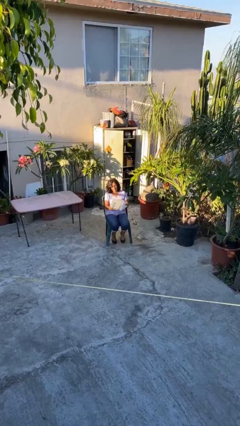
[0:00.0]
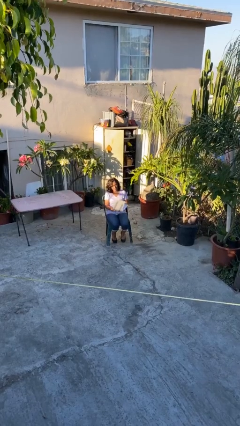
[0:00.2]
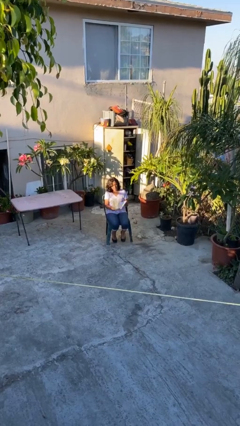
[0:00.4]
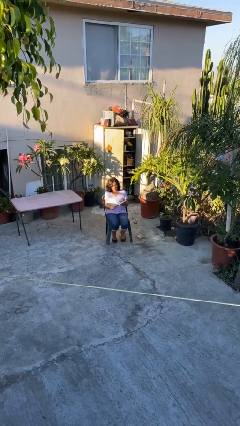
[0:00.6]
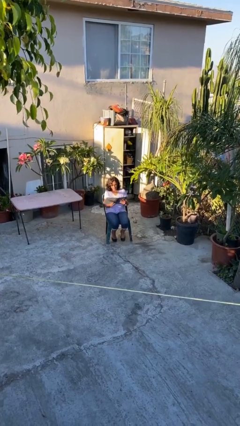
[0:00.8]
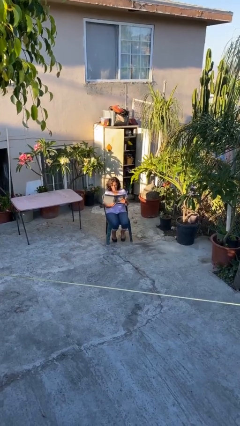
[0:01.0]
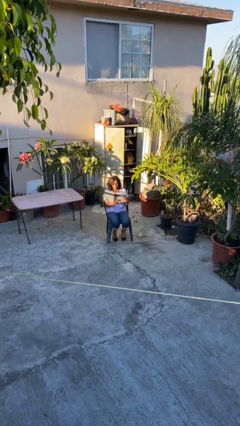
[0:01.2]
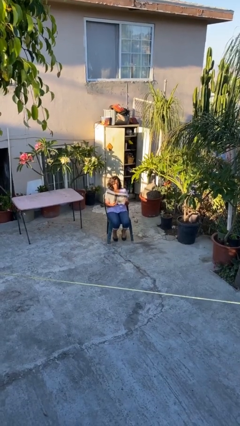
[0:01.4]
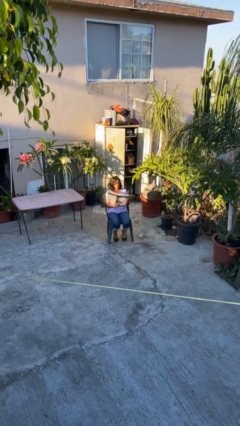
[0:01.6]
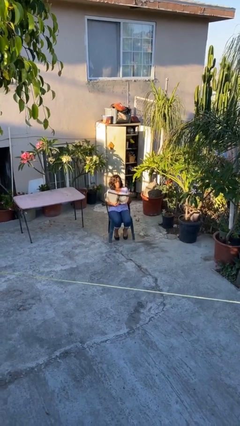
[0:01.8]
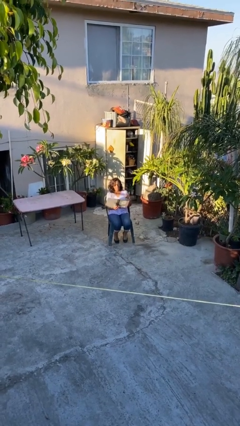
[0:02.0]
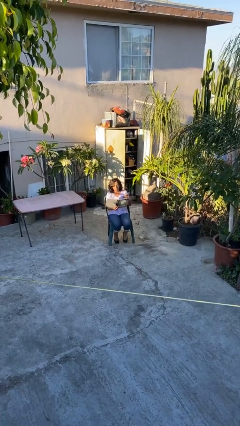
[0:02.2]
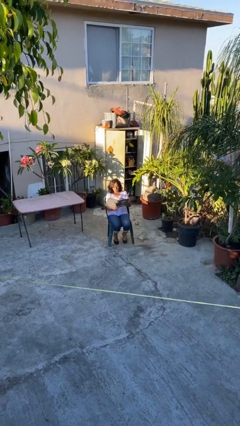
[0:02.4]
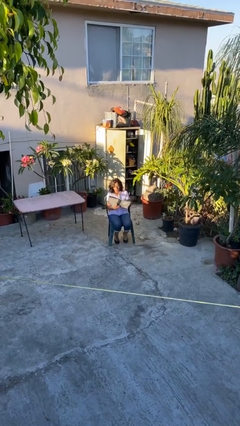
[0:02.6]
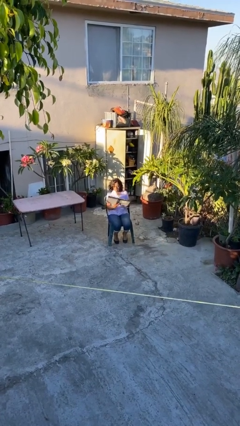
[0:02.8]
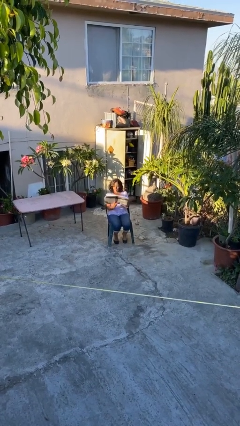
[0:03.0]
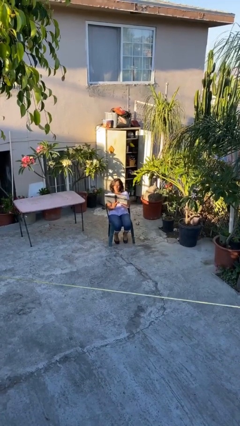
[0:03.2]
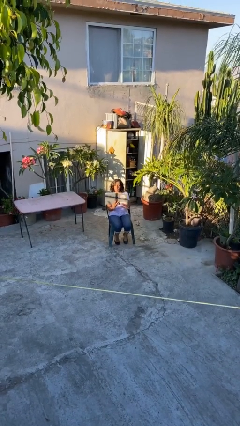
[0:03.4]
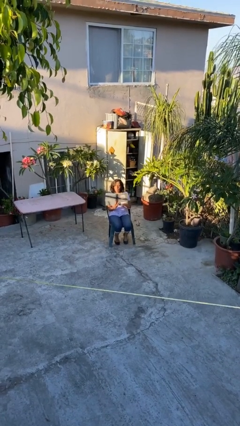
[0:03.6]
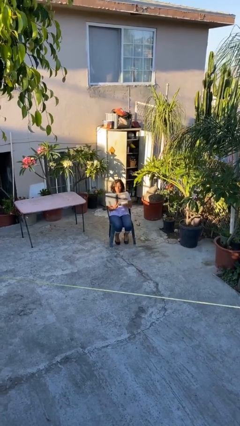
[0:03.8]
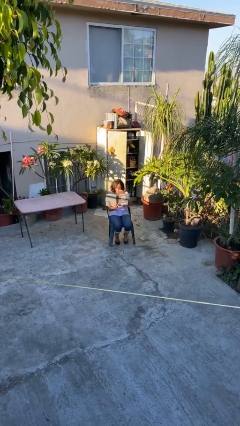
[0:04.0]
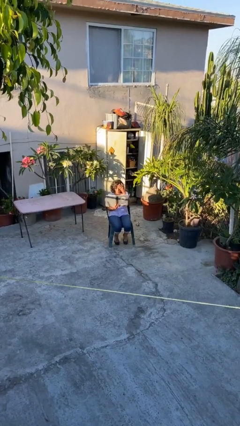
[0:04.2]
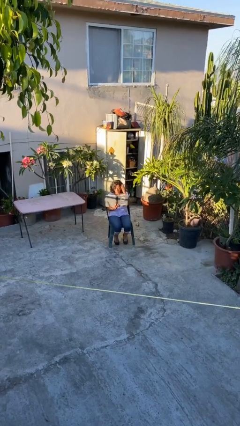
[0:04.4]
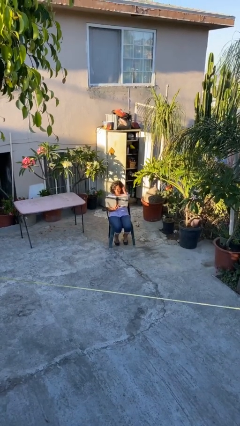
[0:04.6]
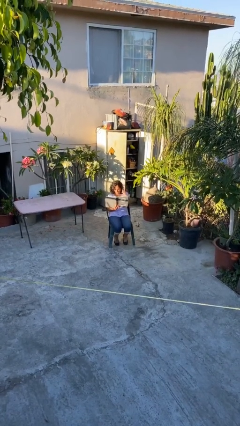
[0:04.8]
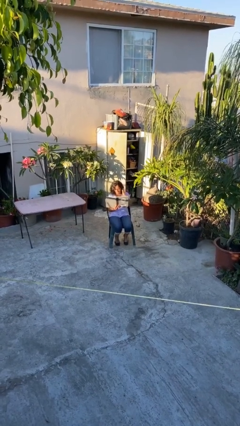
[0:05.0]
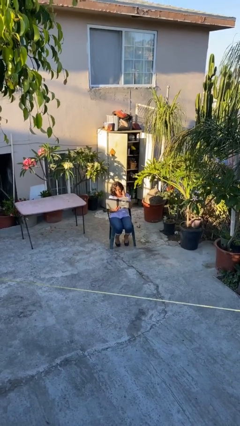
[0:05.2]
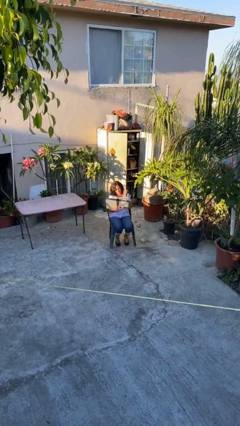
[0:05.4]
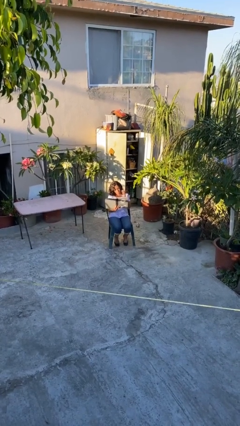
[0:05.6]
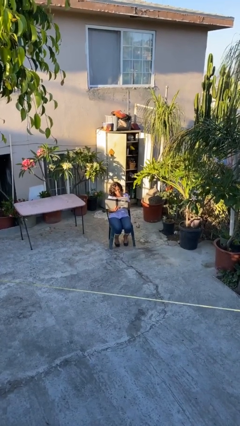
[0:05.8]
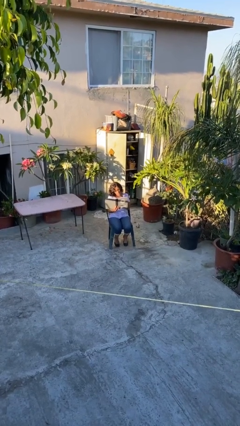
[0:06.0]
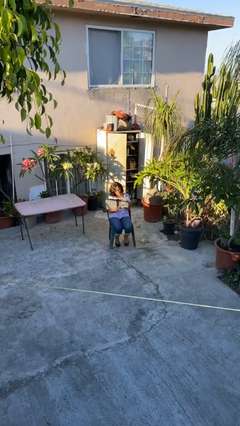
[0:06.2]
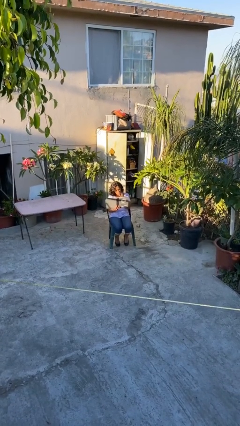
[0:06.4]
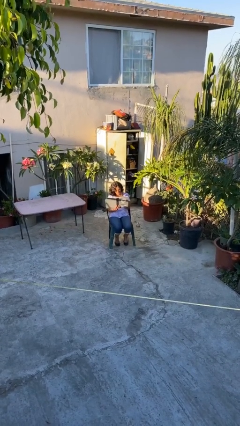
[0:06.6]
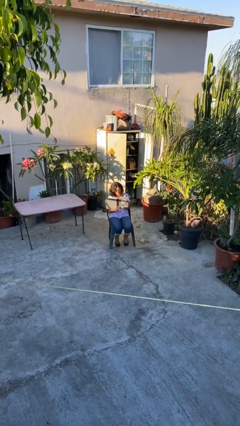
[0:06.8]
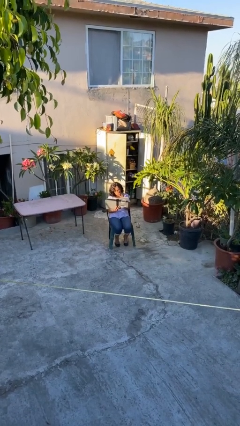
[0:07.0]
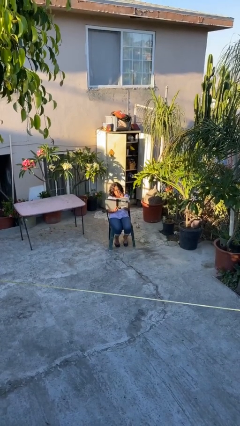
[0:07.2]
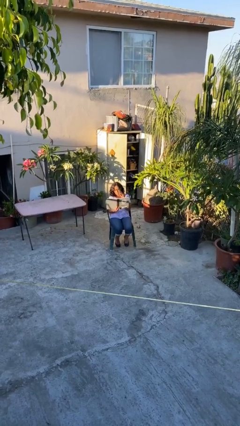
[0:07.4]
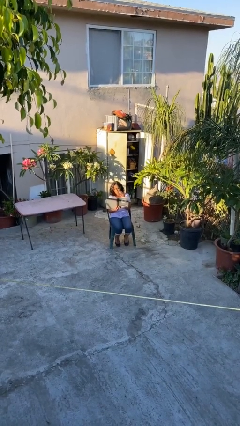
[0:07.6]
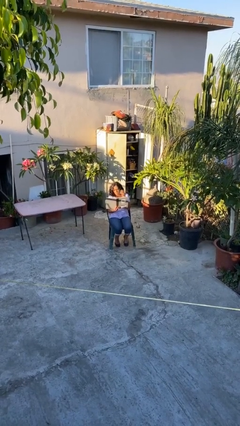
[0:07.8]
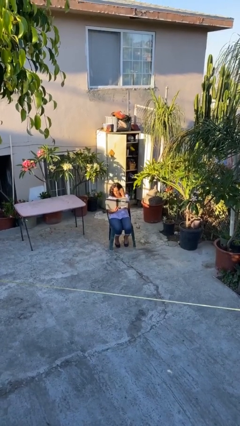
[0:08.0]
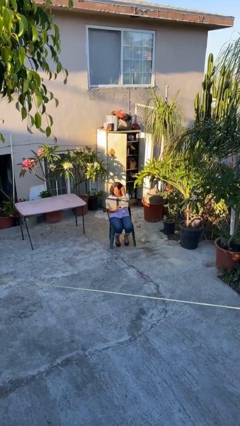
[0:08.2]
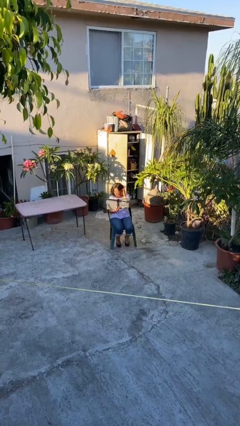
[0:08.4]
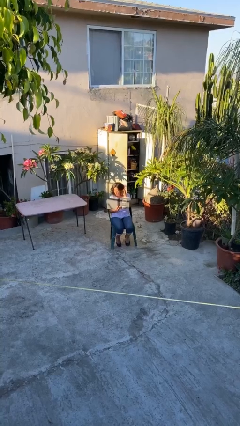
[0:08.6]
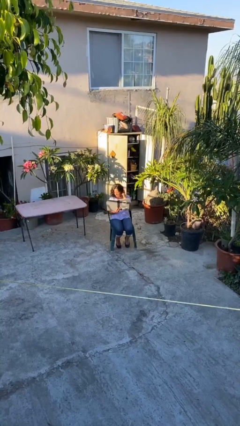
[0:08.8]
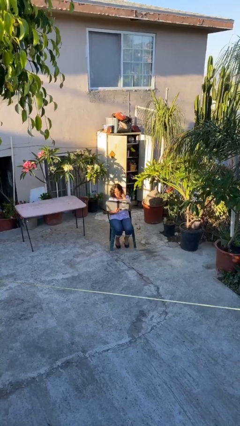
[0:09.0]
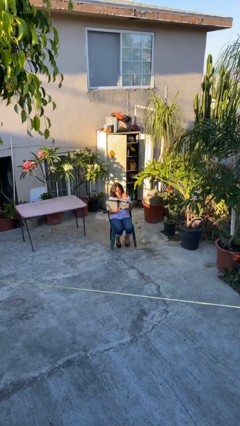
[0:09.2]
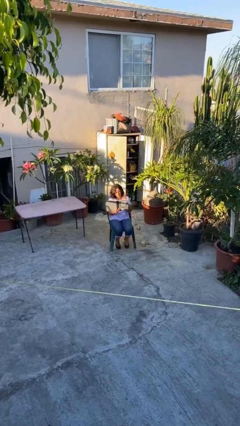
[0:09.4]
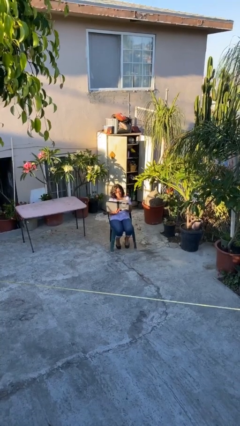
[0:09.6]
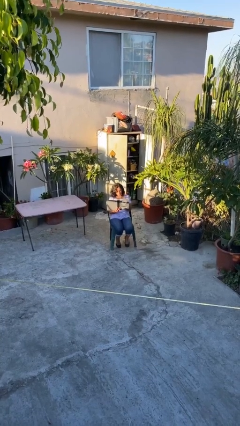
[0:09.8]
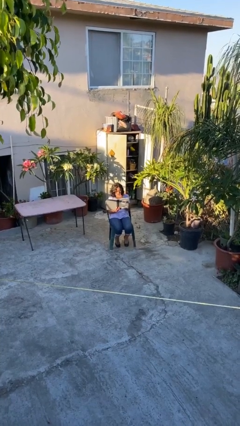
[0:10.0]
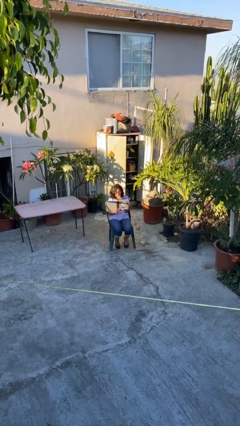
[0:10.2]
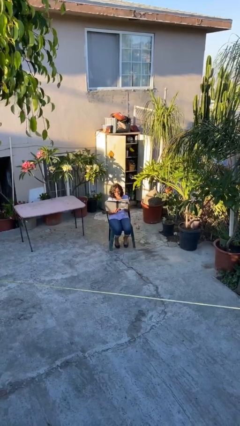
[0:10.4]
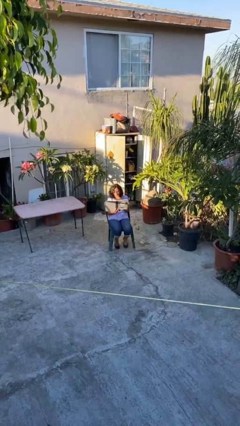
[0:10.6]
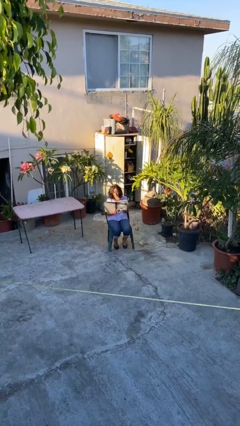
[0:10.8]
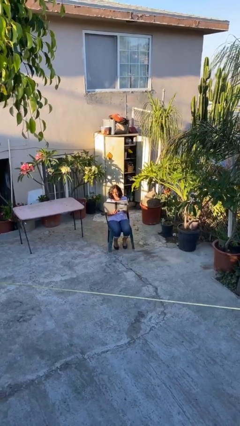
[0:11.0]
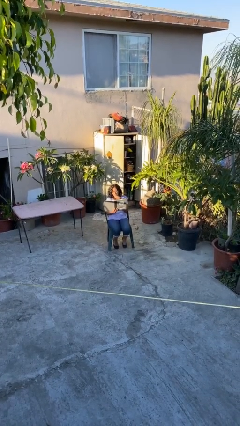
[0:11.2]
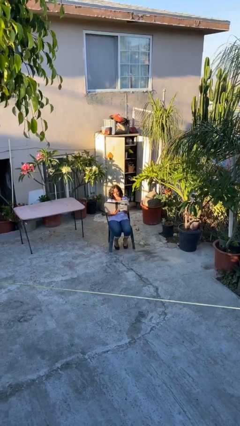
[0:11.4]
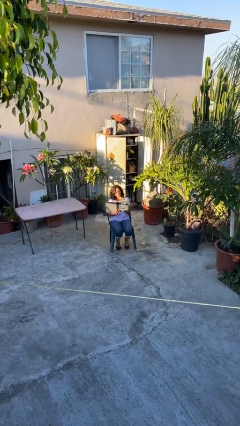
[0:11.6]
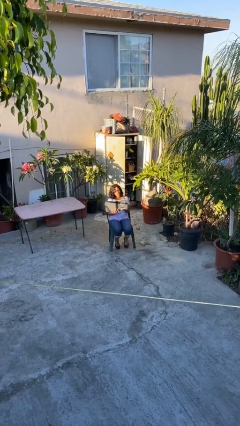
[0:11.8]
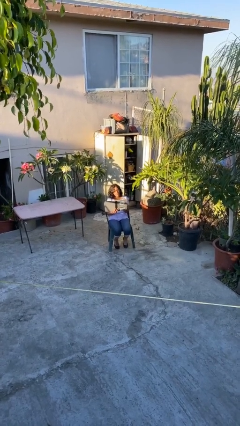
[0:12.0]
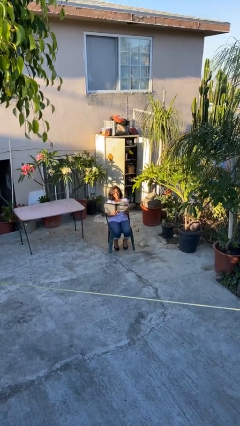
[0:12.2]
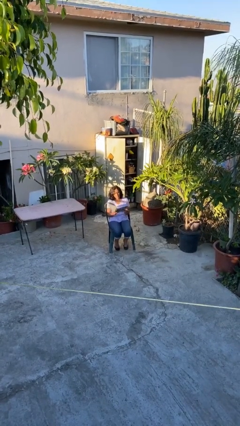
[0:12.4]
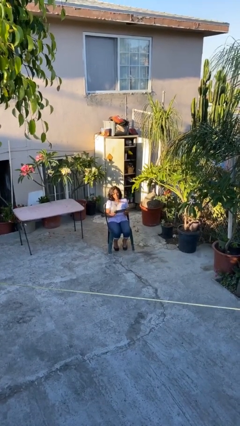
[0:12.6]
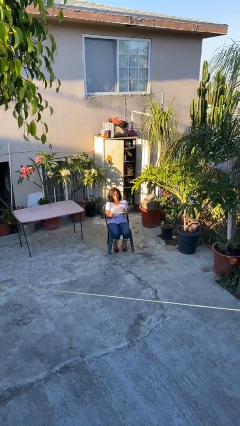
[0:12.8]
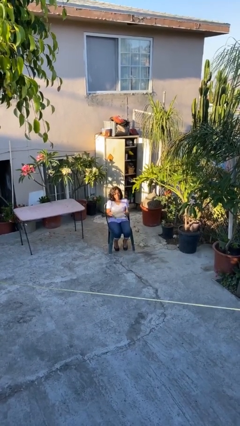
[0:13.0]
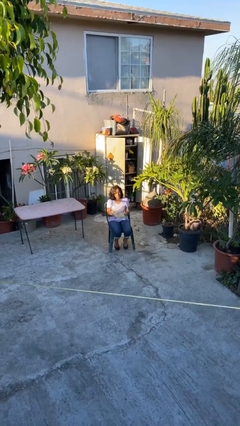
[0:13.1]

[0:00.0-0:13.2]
person reads document

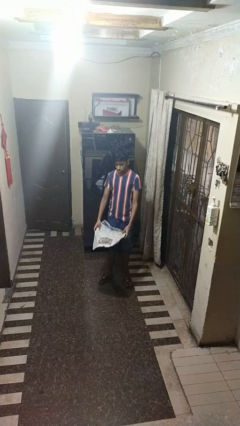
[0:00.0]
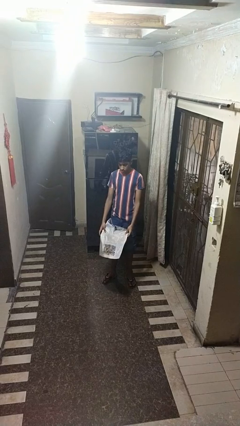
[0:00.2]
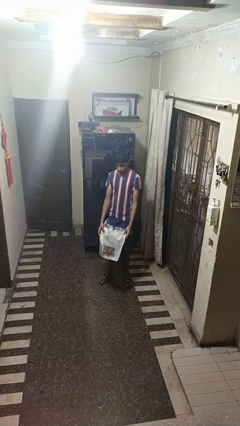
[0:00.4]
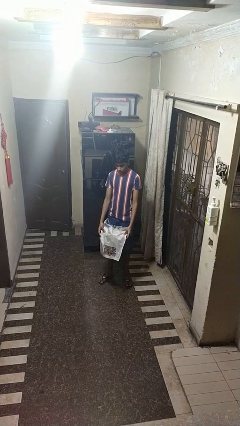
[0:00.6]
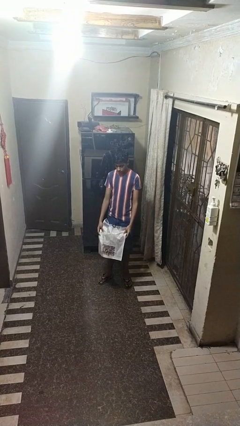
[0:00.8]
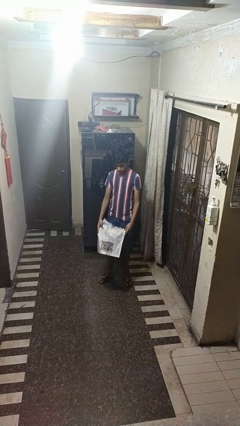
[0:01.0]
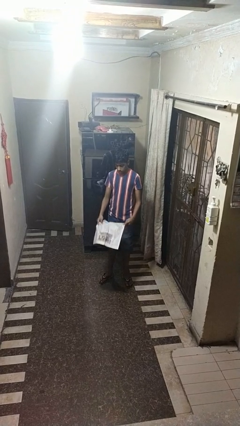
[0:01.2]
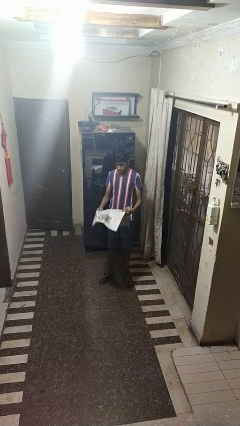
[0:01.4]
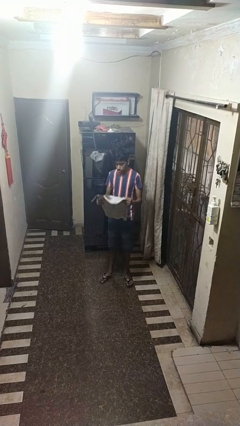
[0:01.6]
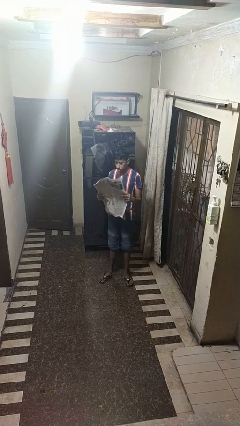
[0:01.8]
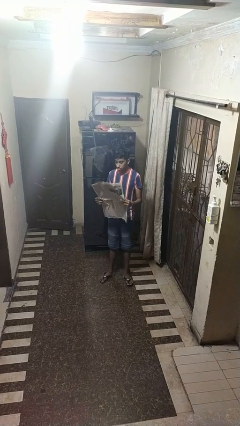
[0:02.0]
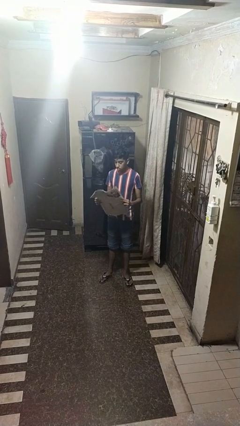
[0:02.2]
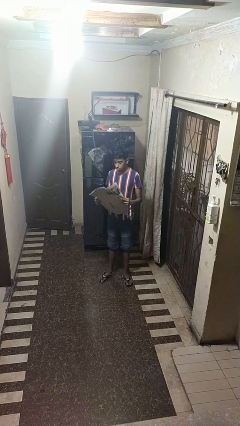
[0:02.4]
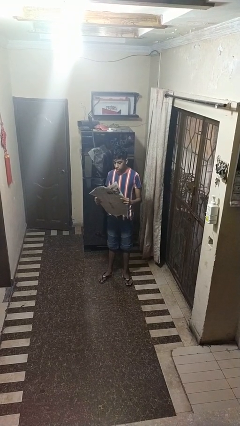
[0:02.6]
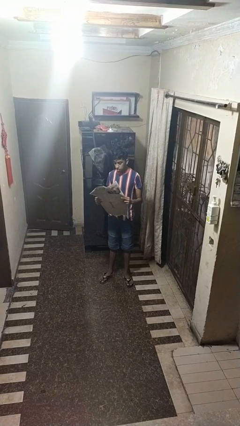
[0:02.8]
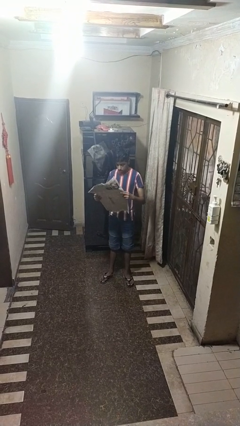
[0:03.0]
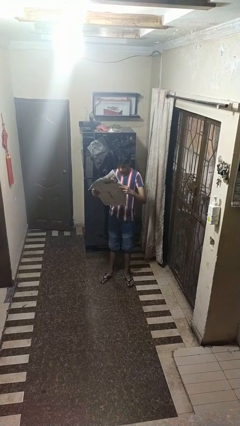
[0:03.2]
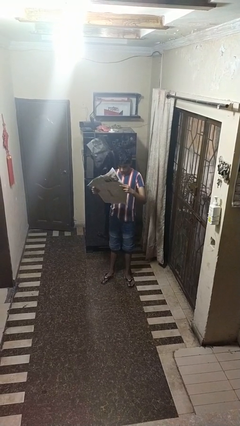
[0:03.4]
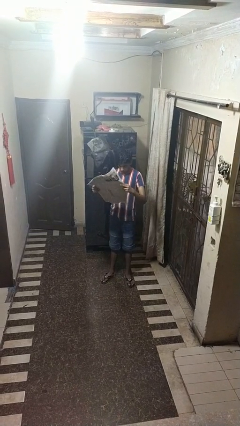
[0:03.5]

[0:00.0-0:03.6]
person reads newspaper

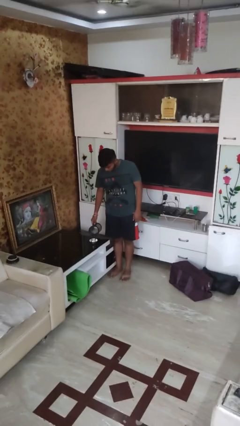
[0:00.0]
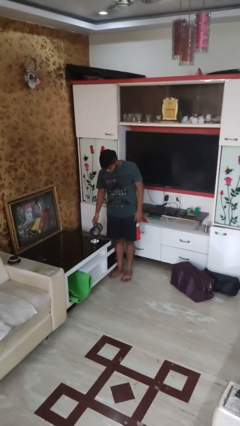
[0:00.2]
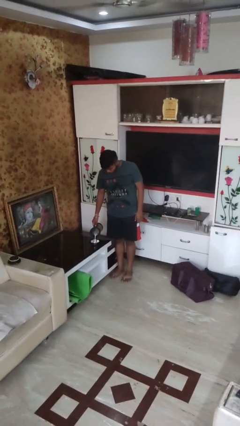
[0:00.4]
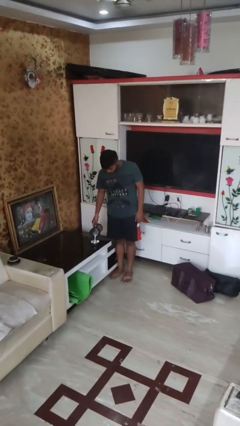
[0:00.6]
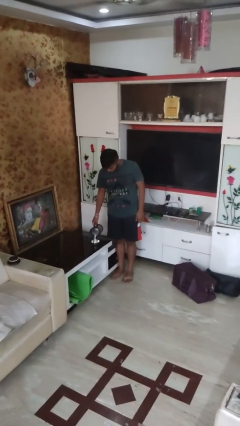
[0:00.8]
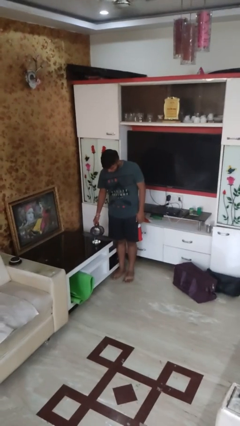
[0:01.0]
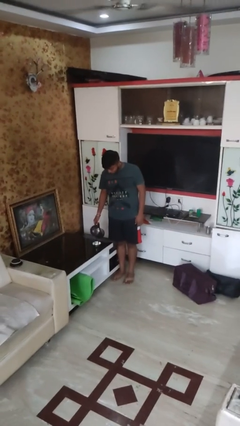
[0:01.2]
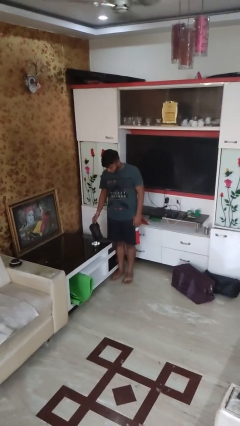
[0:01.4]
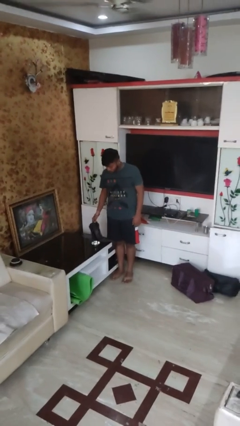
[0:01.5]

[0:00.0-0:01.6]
person pours into bowl
